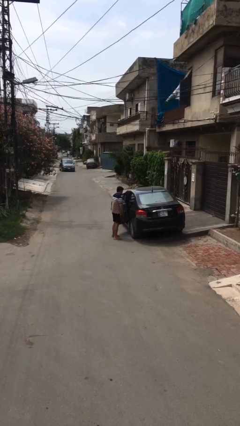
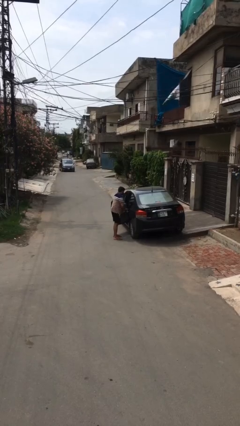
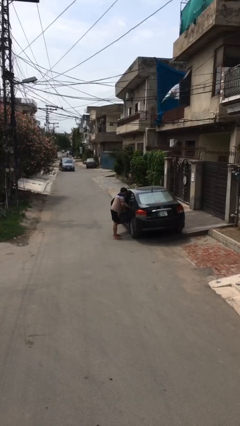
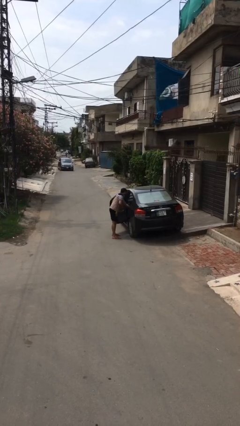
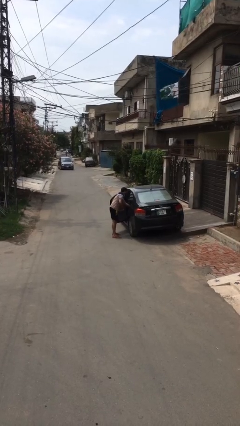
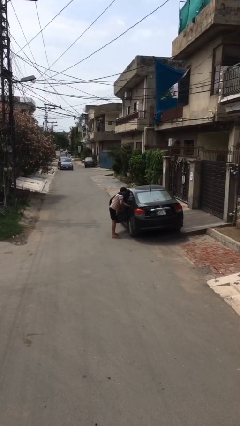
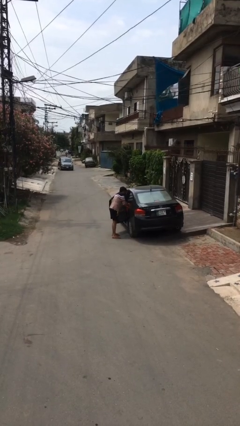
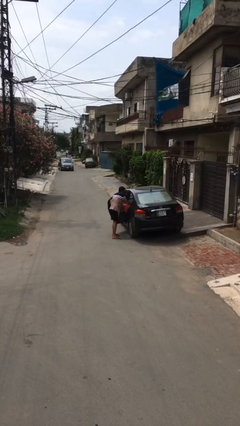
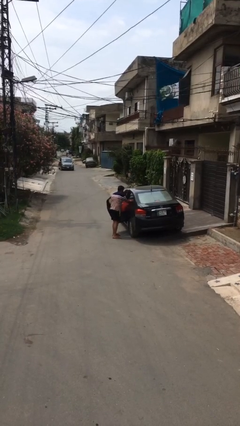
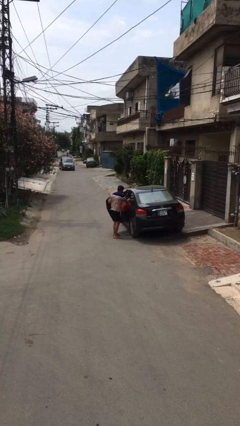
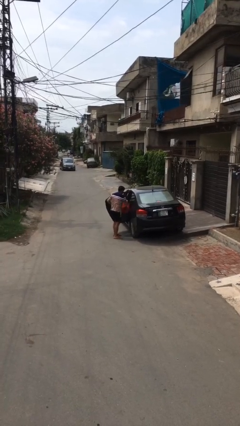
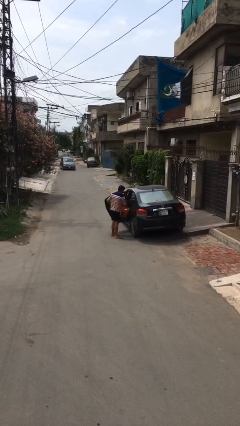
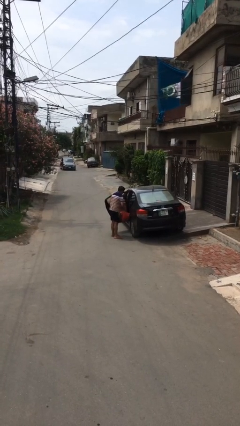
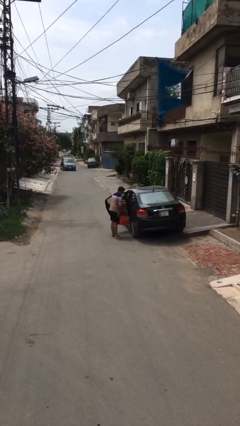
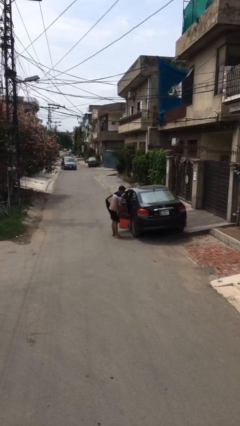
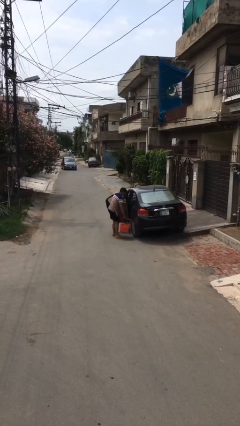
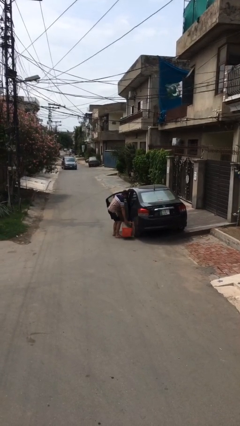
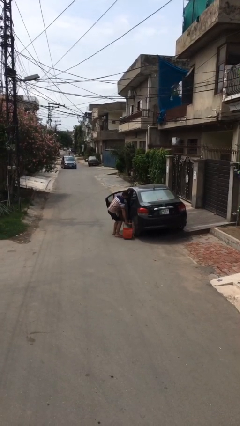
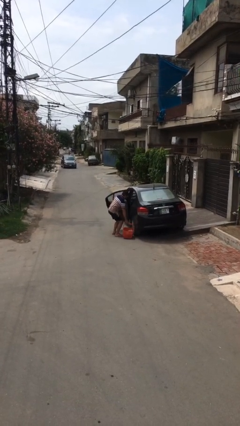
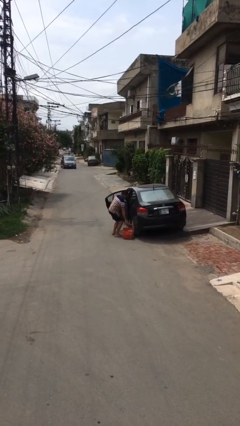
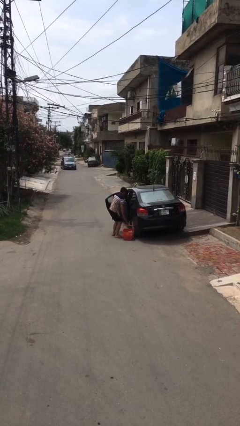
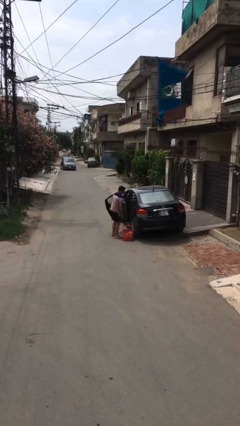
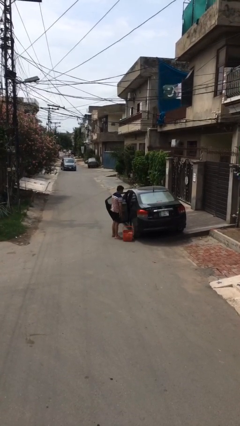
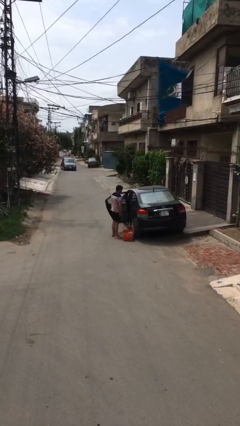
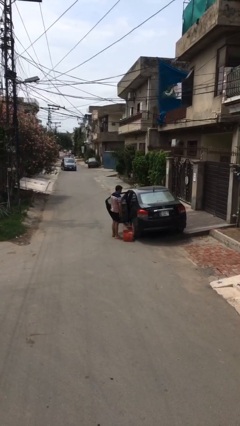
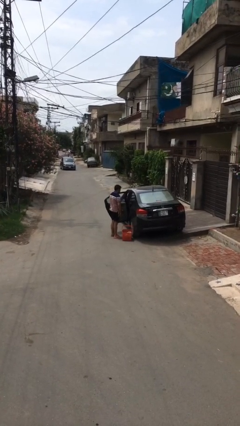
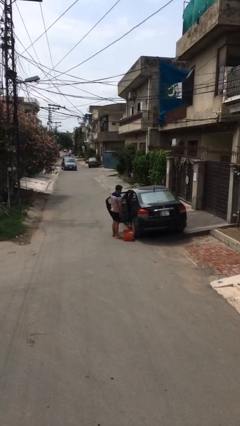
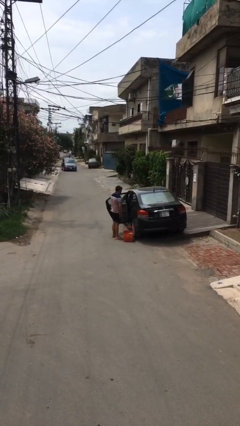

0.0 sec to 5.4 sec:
person unloads car

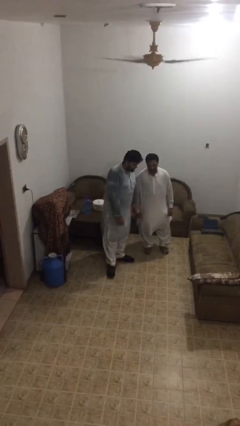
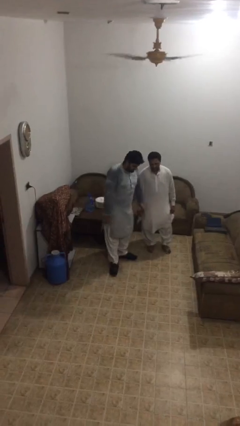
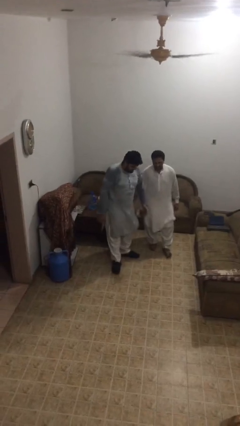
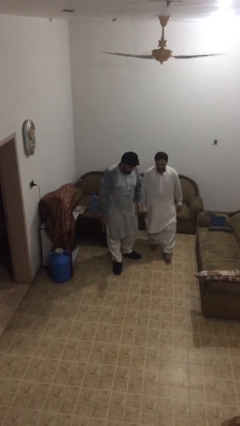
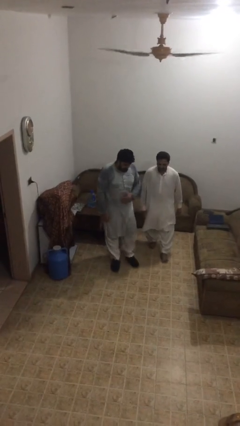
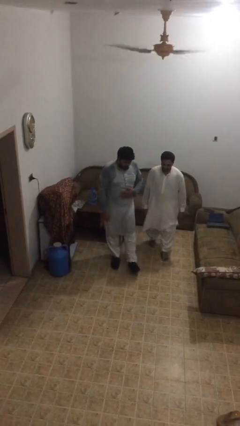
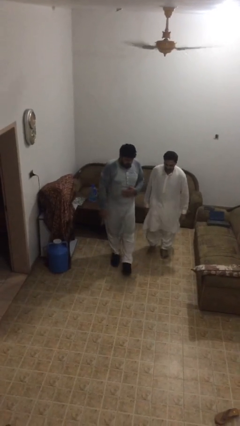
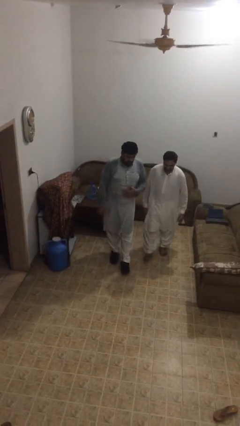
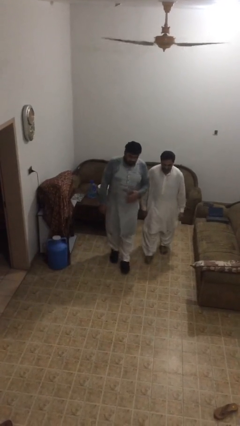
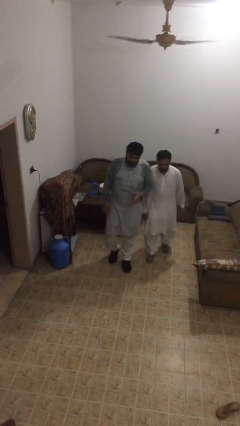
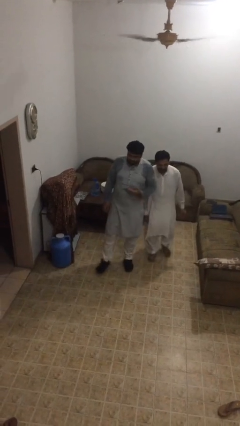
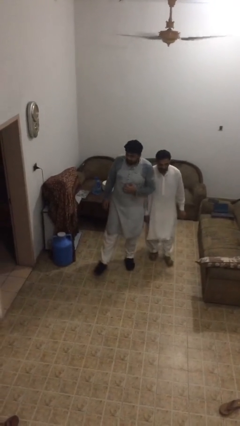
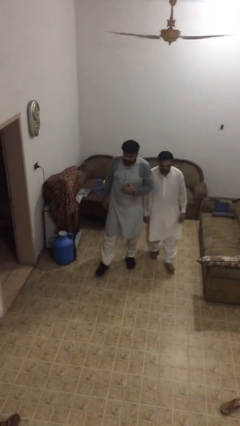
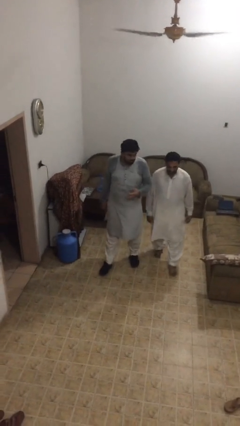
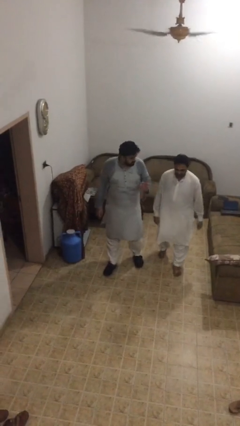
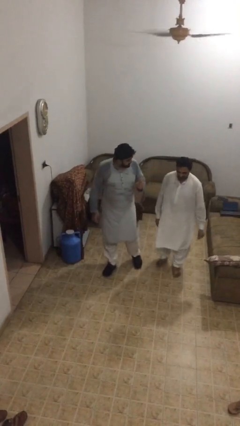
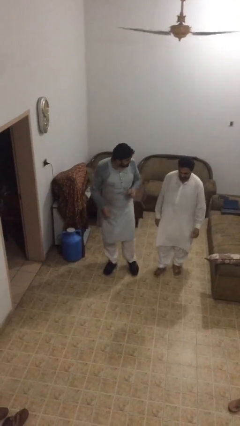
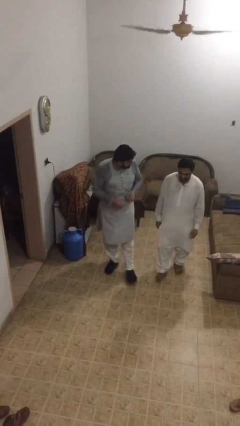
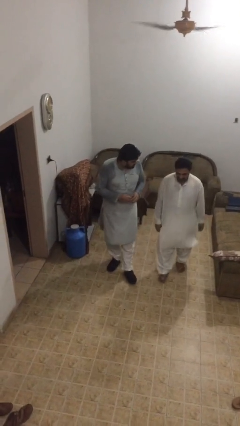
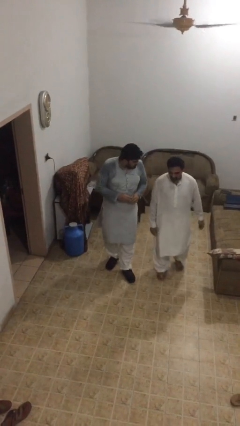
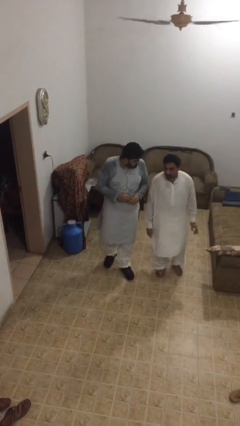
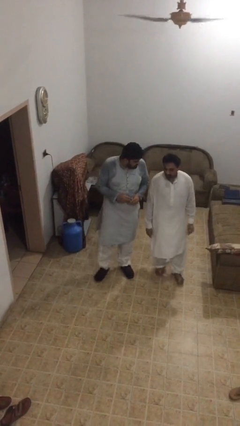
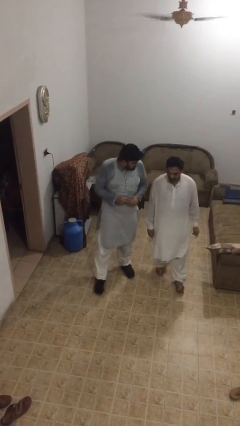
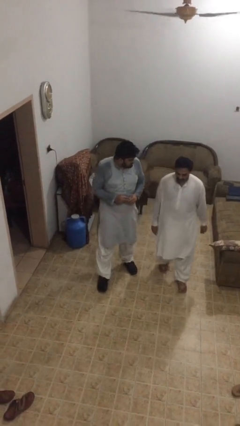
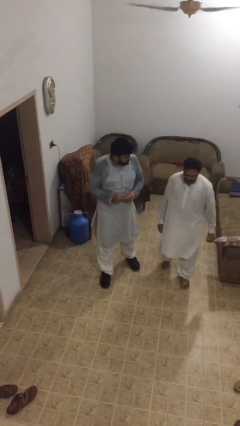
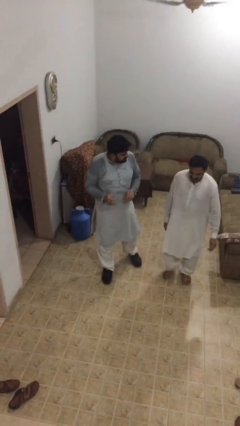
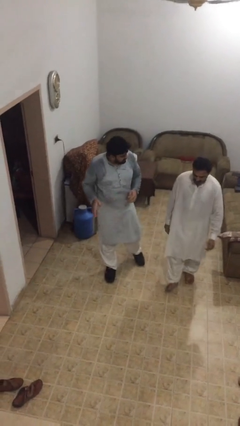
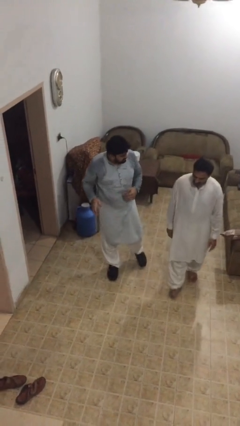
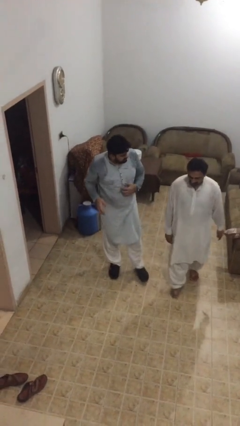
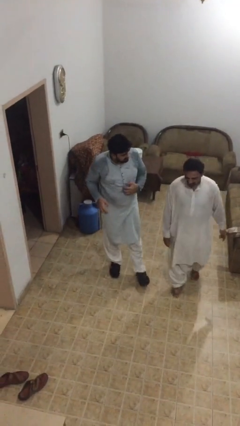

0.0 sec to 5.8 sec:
person talks to person

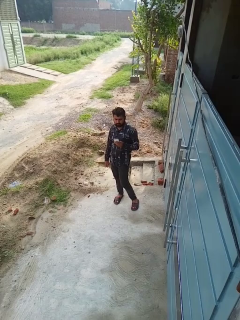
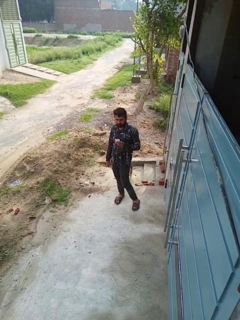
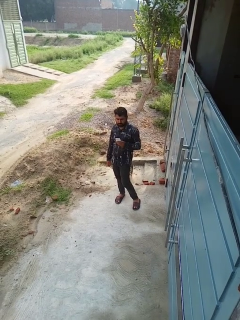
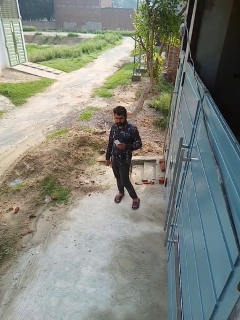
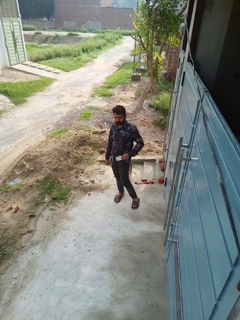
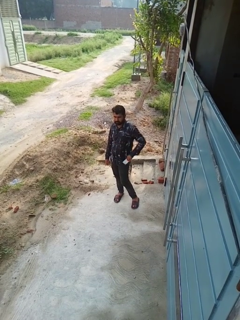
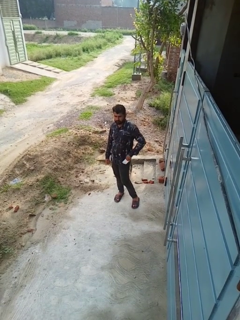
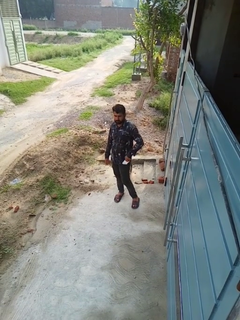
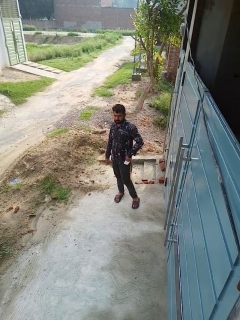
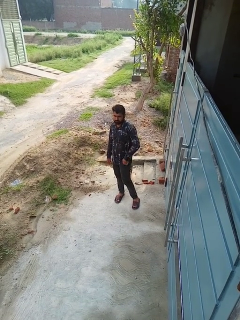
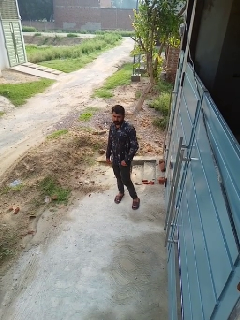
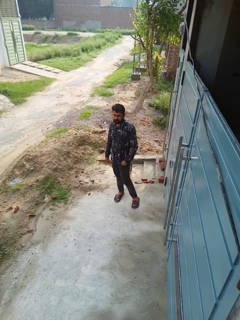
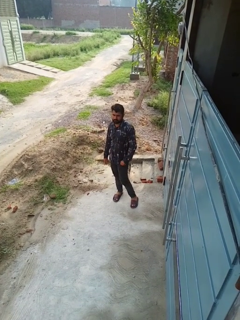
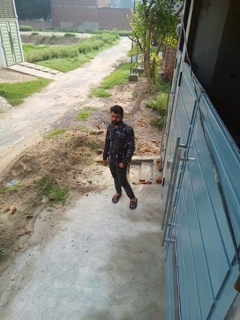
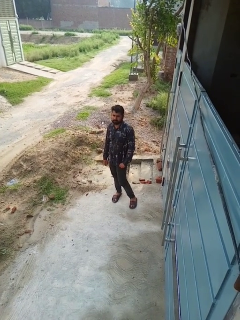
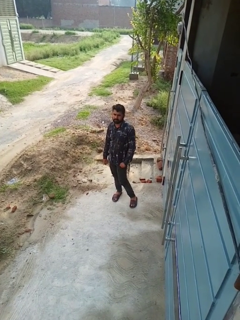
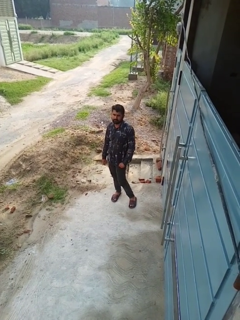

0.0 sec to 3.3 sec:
person puts phone into pocket

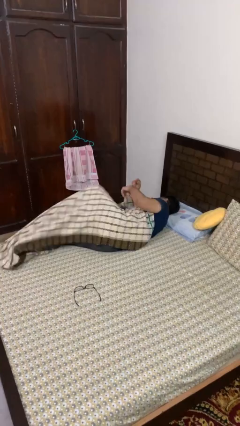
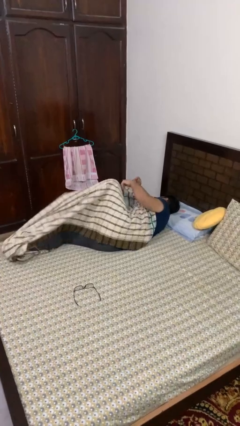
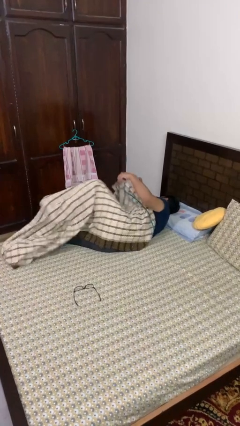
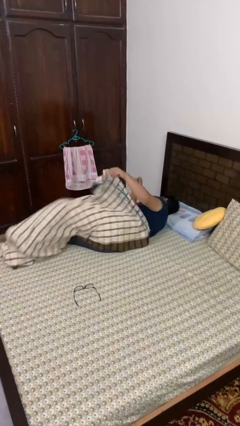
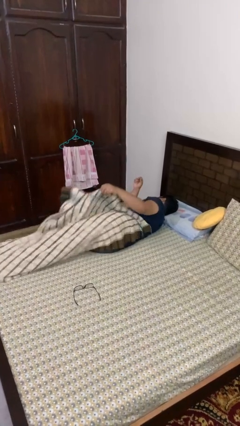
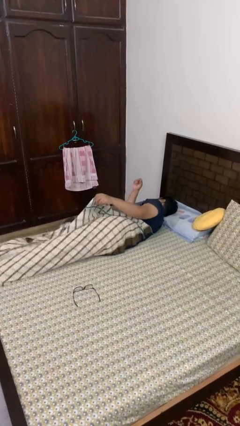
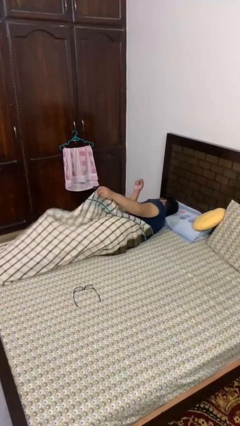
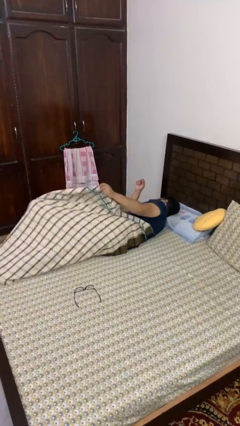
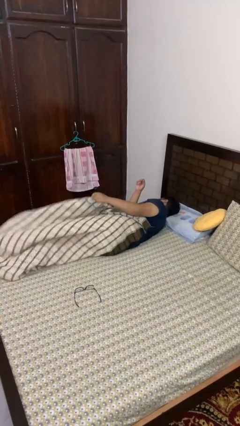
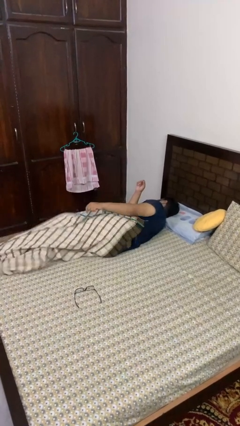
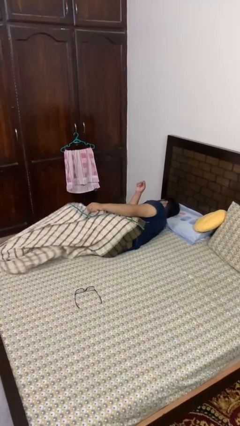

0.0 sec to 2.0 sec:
person uncovers with bedsheets

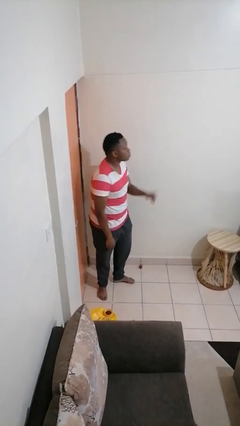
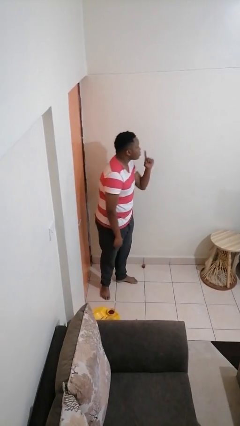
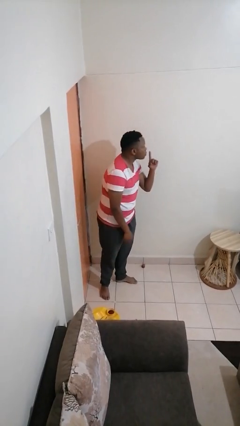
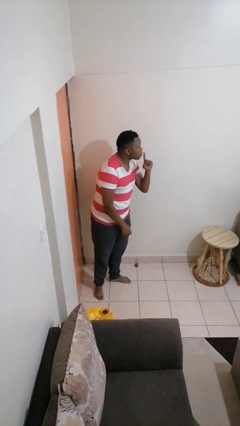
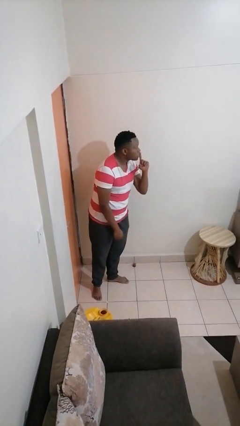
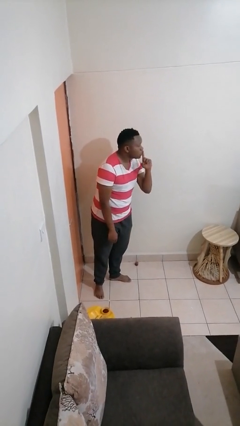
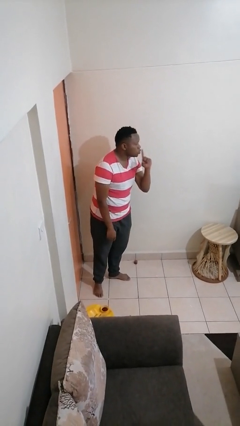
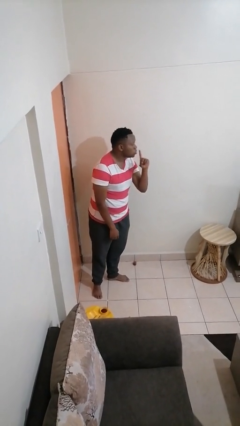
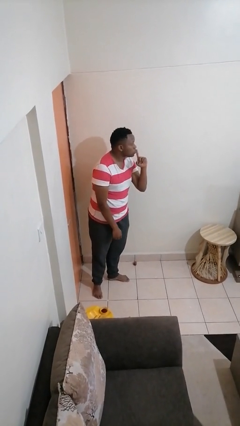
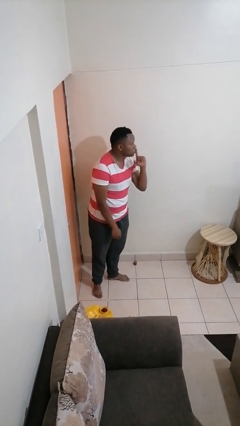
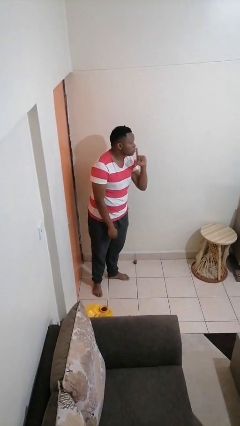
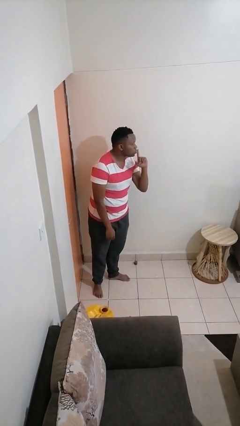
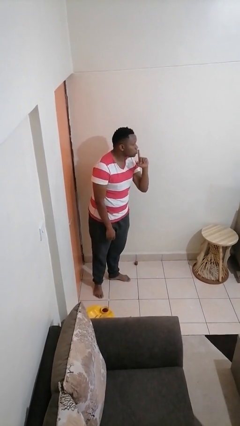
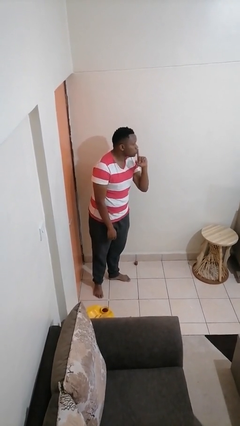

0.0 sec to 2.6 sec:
person gestures be quiet
